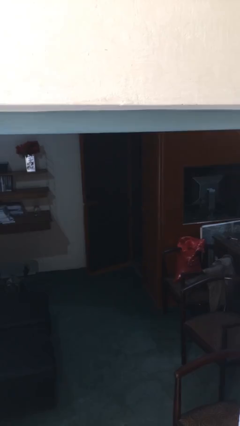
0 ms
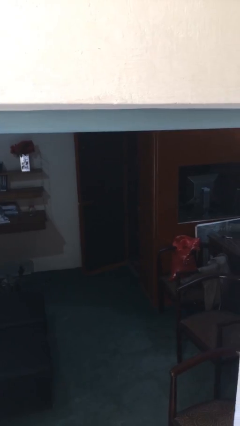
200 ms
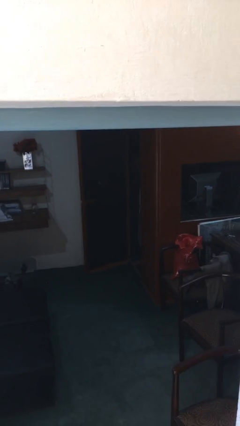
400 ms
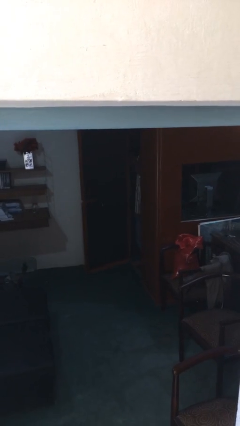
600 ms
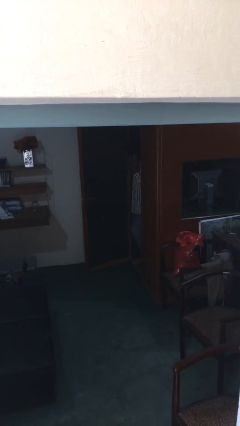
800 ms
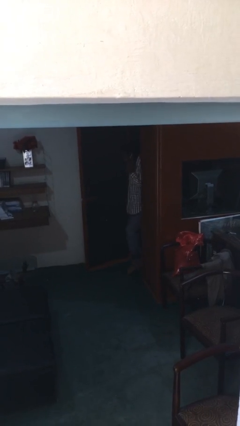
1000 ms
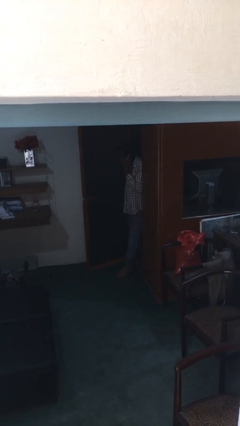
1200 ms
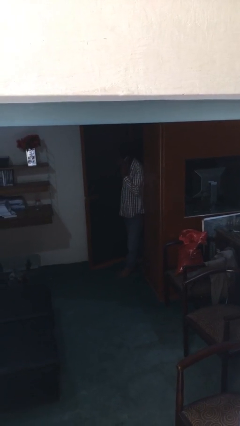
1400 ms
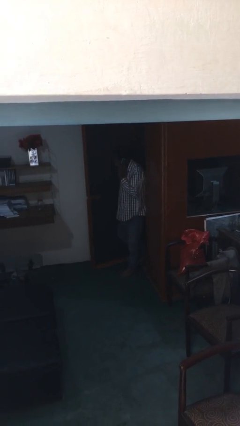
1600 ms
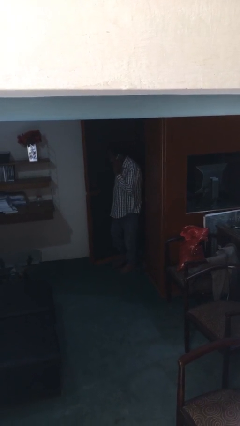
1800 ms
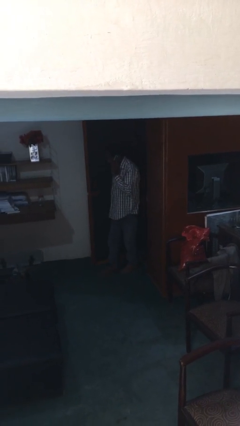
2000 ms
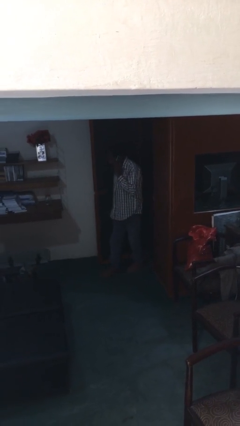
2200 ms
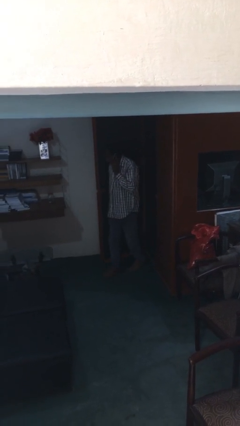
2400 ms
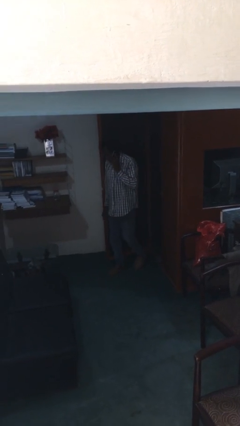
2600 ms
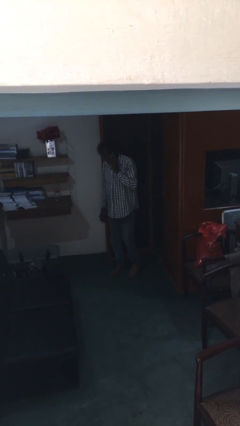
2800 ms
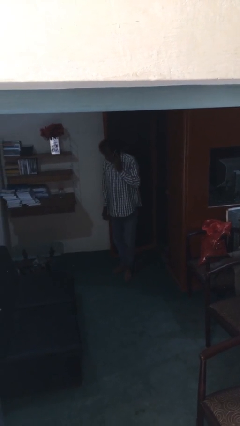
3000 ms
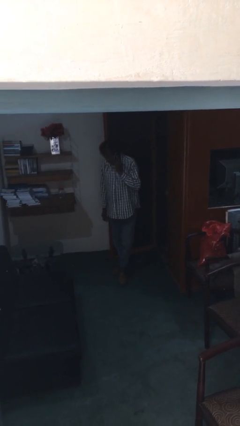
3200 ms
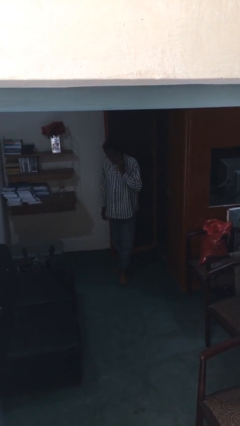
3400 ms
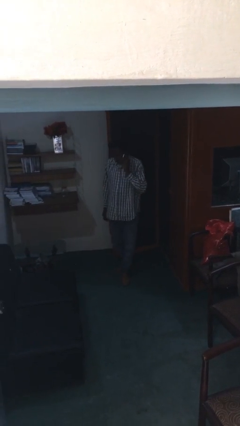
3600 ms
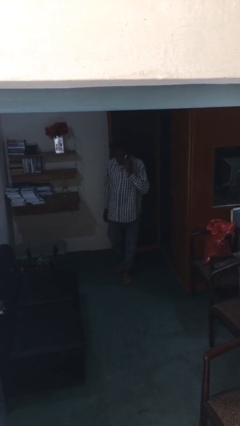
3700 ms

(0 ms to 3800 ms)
person enters scene through structure

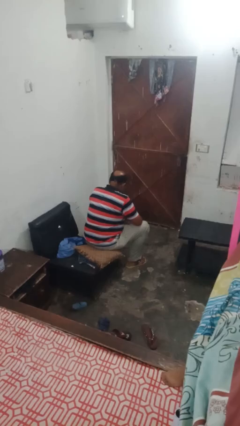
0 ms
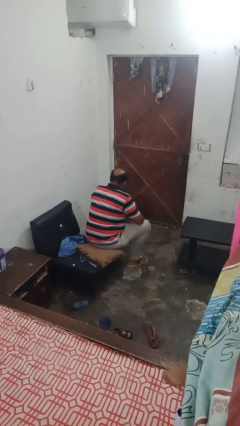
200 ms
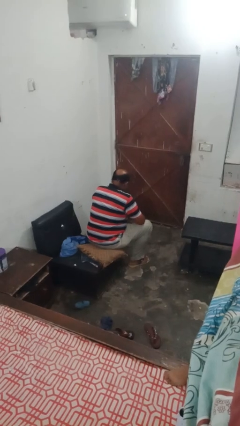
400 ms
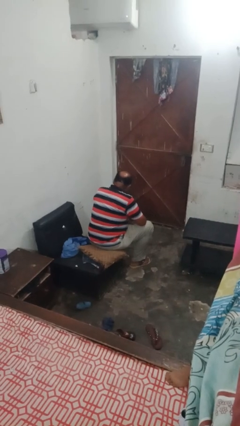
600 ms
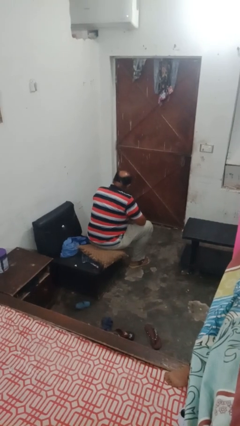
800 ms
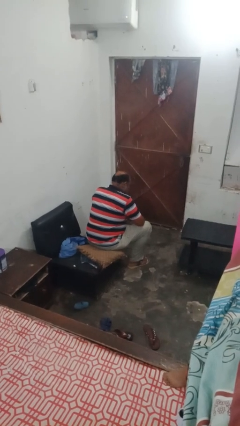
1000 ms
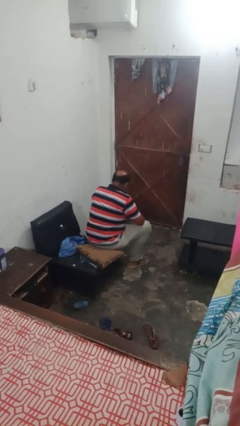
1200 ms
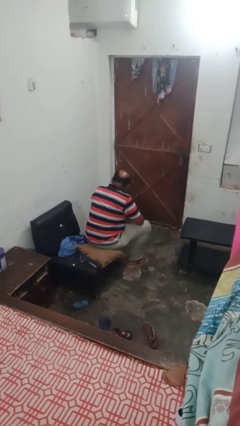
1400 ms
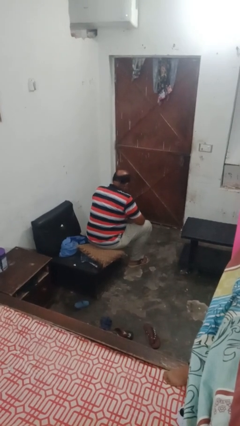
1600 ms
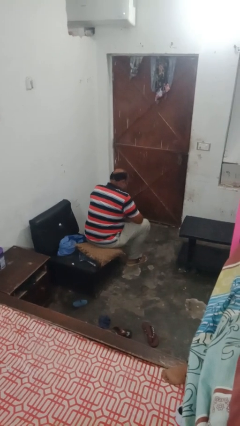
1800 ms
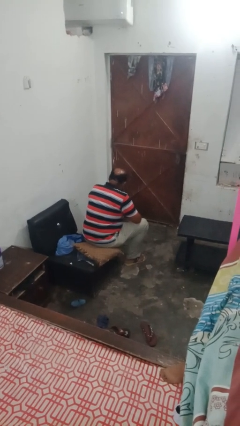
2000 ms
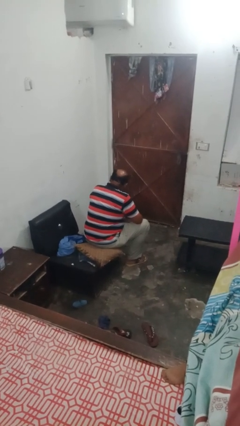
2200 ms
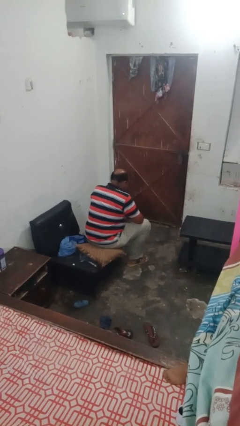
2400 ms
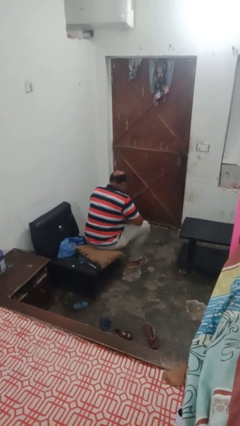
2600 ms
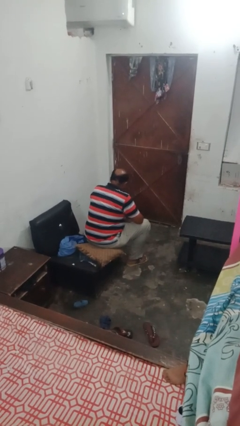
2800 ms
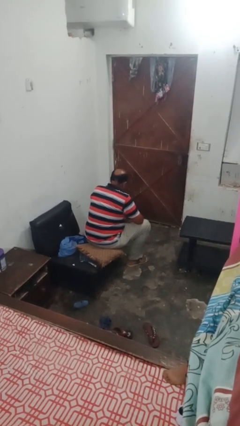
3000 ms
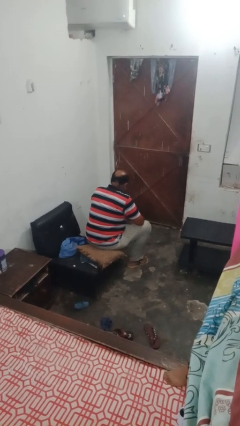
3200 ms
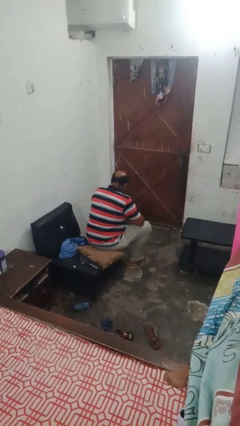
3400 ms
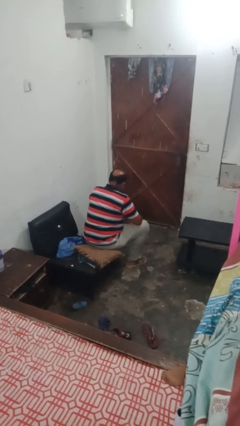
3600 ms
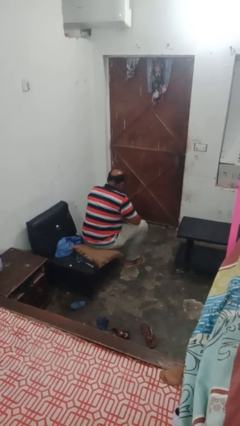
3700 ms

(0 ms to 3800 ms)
person shakes head

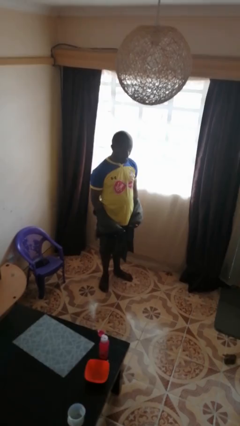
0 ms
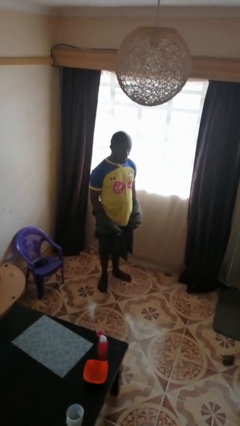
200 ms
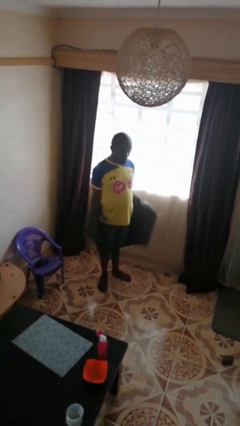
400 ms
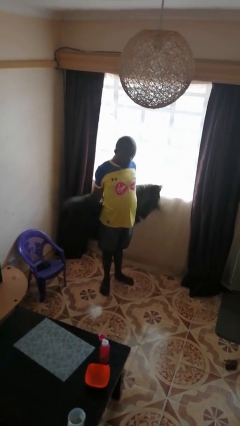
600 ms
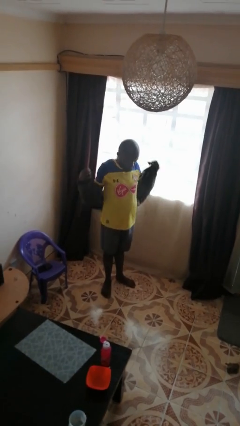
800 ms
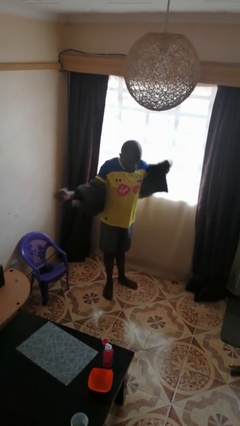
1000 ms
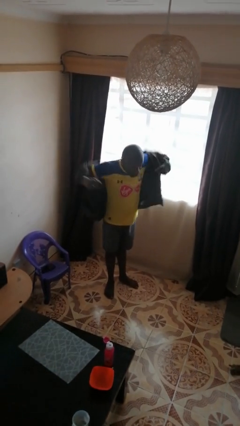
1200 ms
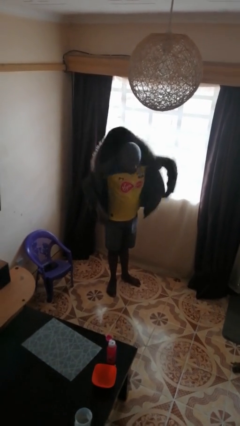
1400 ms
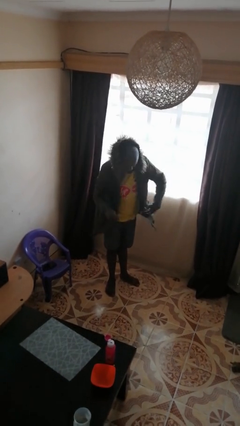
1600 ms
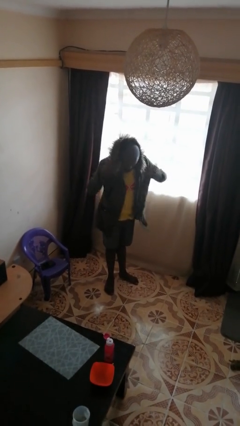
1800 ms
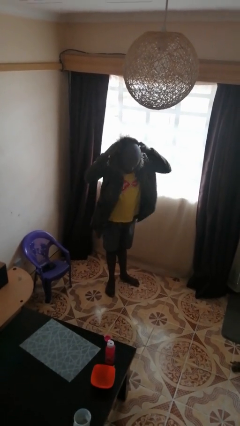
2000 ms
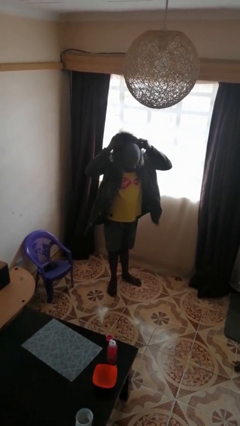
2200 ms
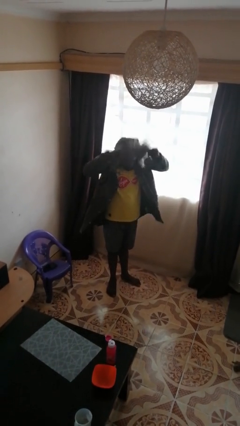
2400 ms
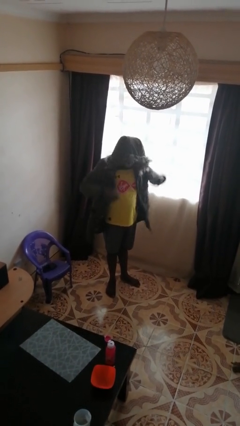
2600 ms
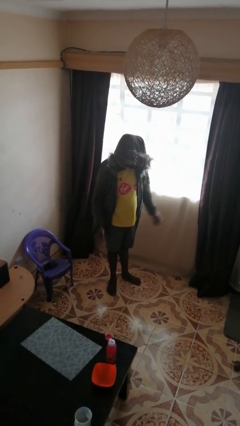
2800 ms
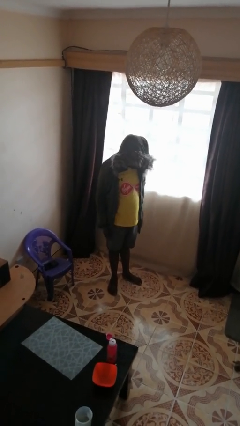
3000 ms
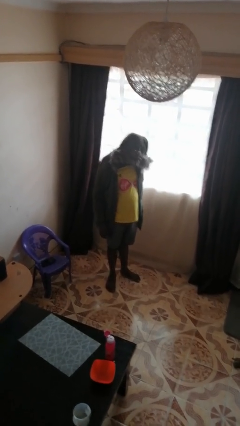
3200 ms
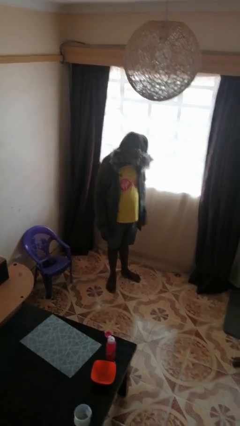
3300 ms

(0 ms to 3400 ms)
person puts on hoodie

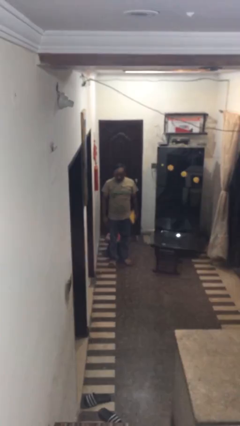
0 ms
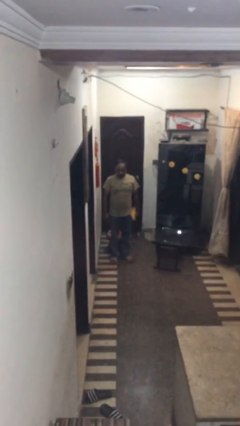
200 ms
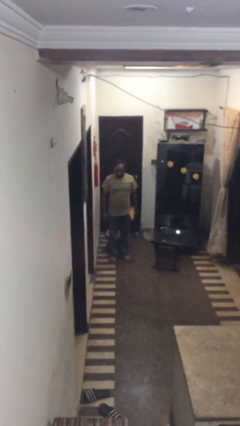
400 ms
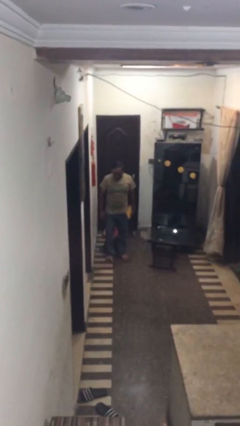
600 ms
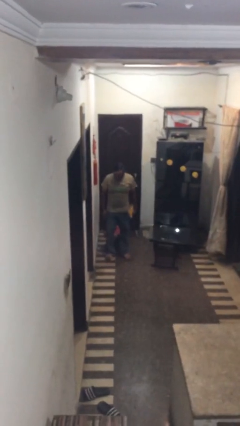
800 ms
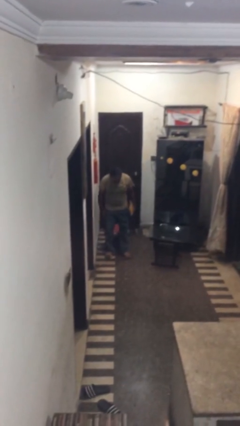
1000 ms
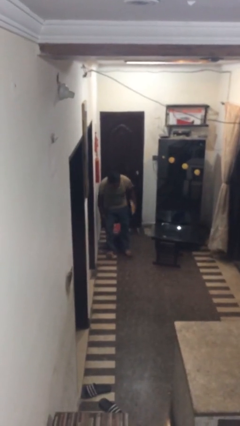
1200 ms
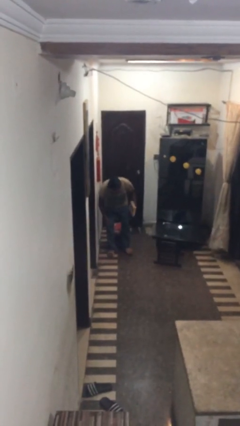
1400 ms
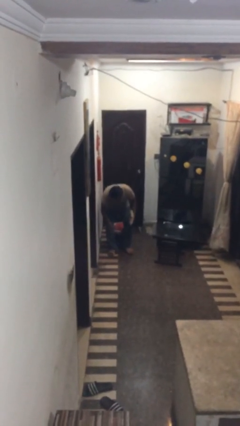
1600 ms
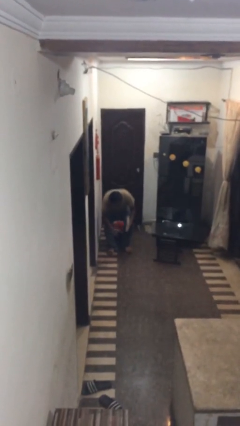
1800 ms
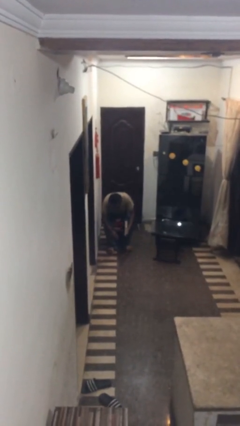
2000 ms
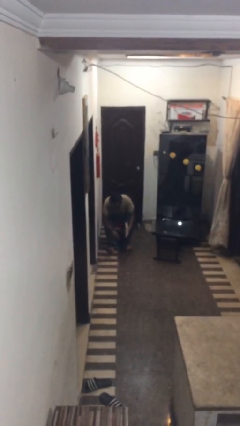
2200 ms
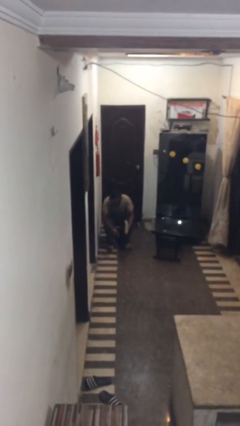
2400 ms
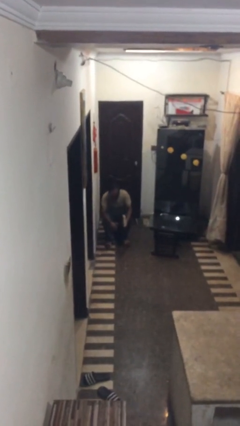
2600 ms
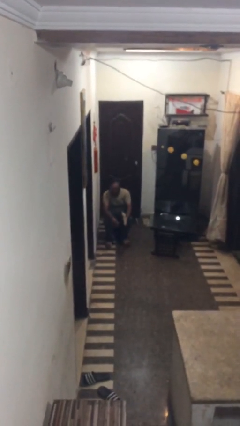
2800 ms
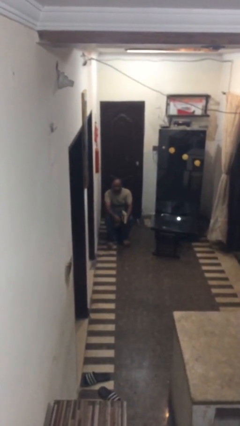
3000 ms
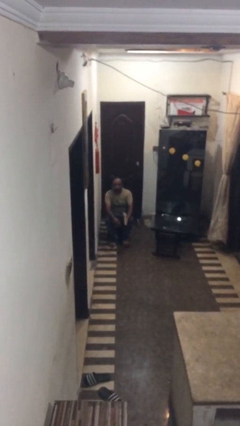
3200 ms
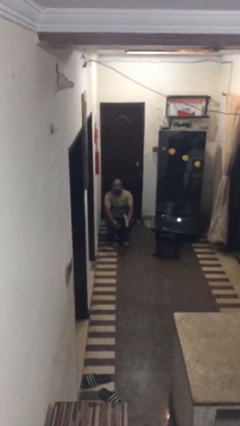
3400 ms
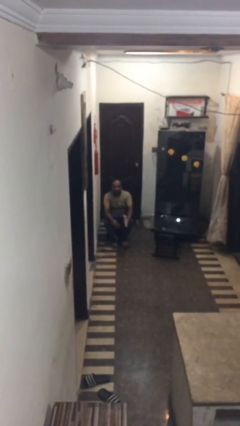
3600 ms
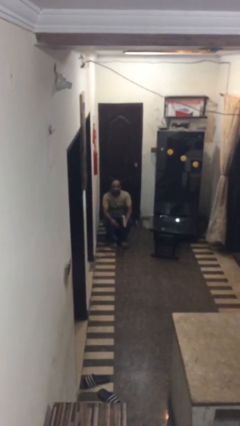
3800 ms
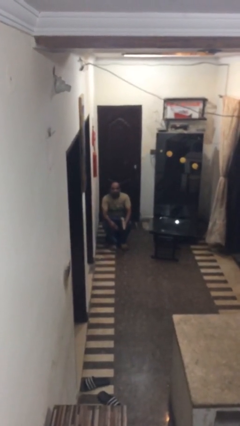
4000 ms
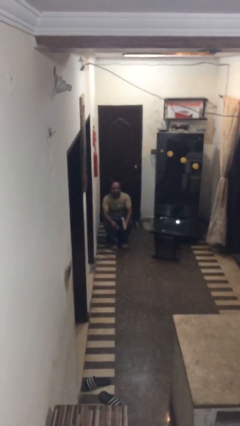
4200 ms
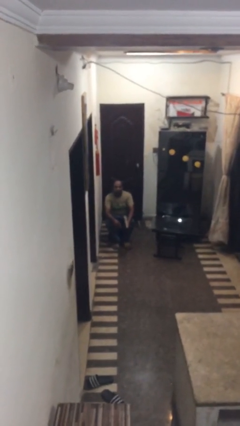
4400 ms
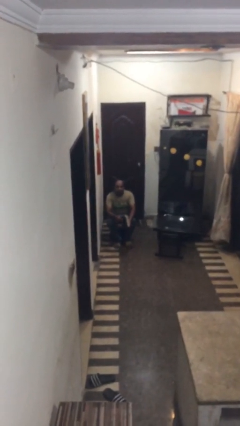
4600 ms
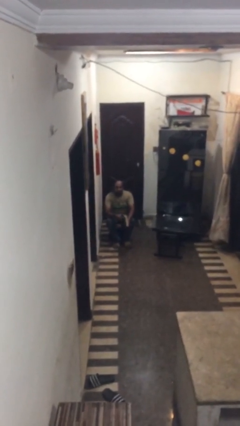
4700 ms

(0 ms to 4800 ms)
person sits down

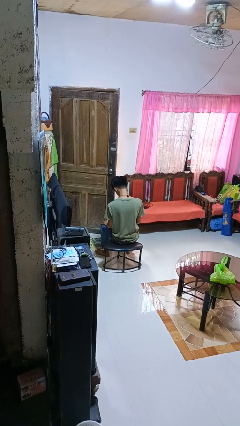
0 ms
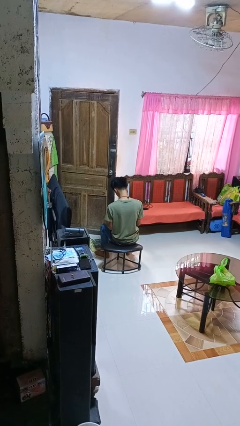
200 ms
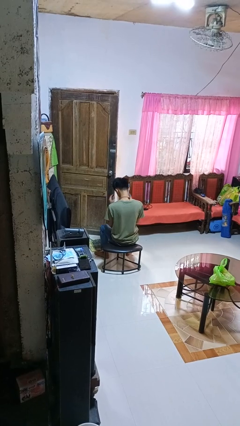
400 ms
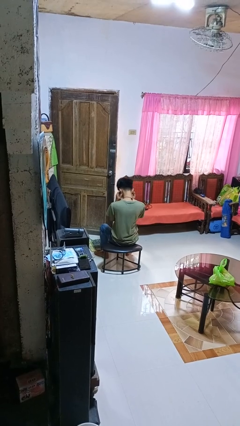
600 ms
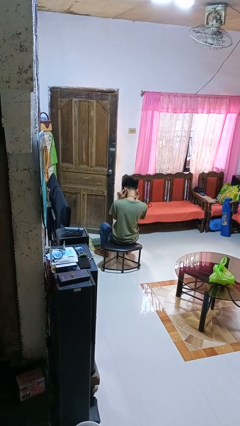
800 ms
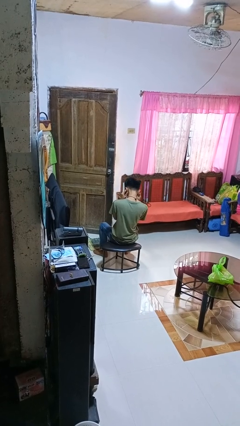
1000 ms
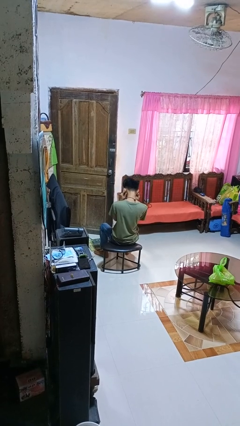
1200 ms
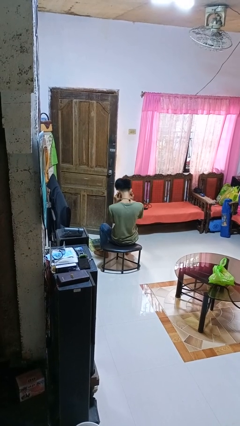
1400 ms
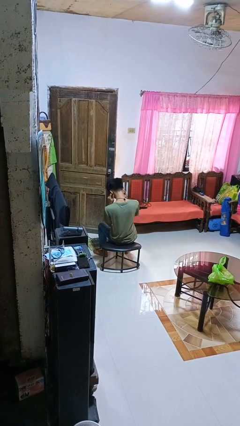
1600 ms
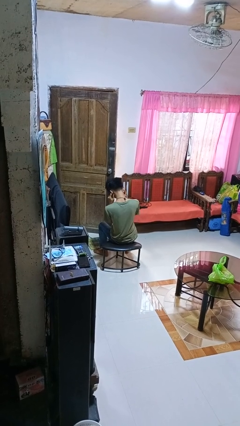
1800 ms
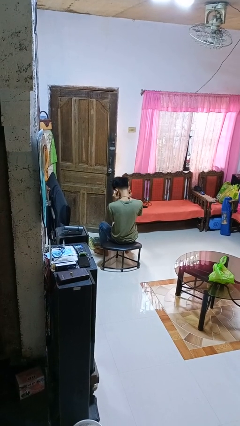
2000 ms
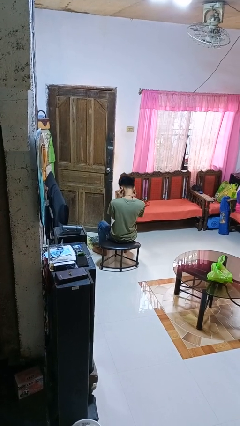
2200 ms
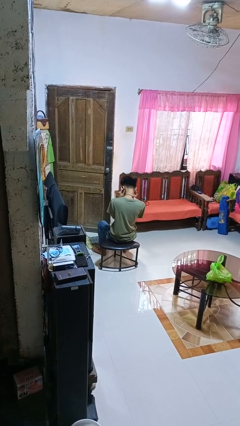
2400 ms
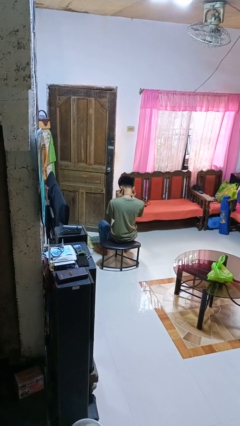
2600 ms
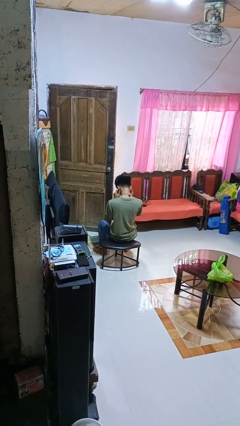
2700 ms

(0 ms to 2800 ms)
person puts fingers in ear
